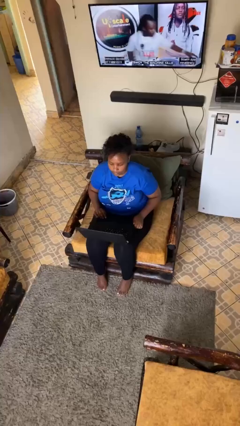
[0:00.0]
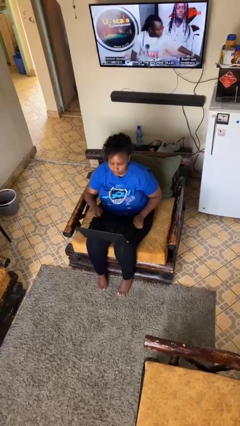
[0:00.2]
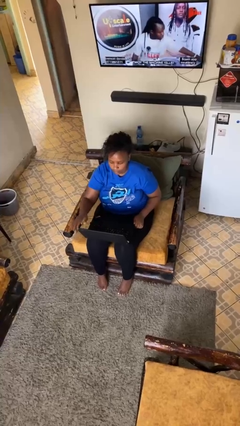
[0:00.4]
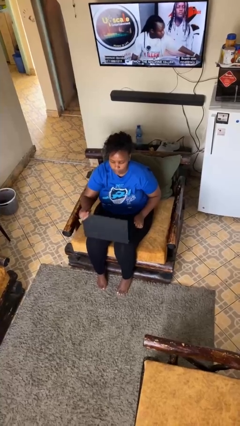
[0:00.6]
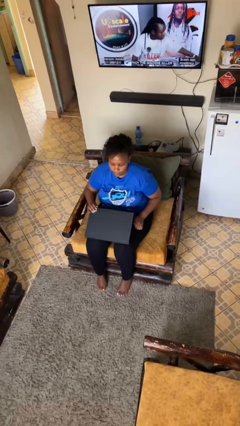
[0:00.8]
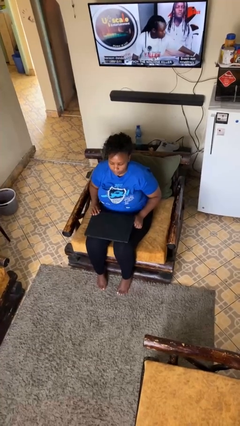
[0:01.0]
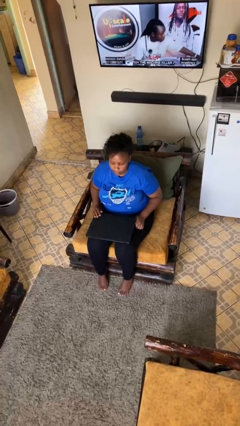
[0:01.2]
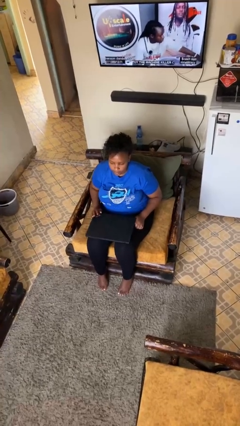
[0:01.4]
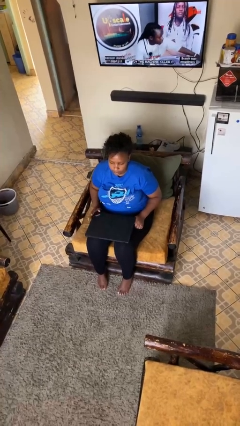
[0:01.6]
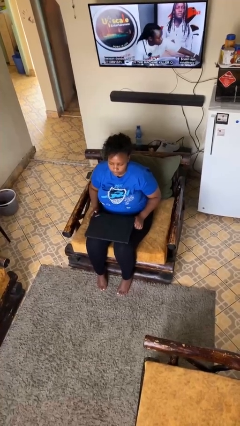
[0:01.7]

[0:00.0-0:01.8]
person closes laptop

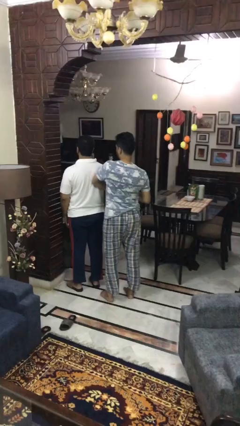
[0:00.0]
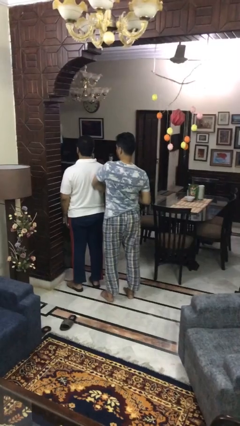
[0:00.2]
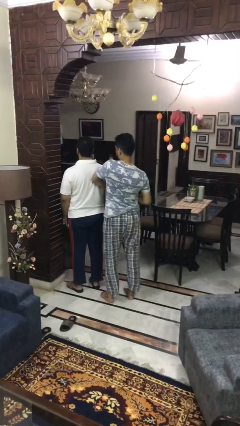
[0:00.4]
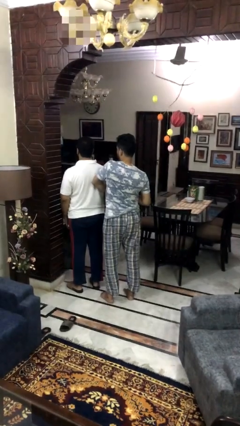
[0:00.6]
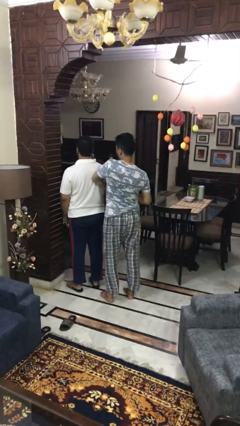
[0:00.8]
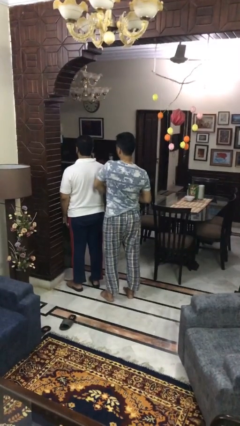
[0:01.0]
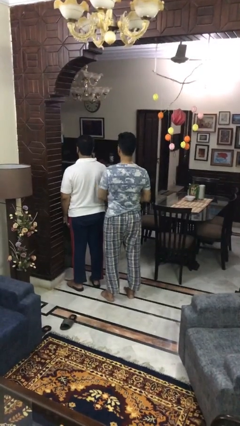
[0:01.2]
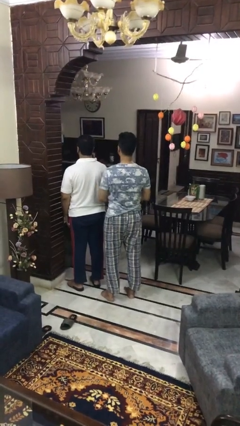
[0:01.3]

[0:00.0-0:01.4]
person nudges person with elbow

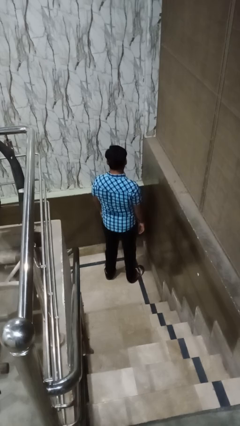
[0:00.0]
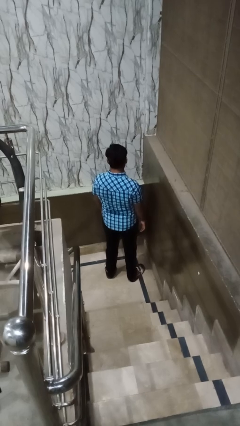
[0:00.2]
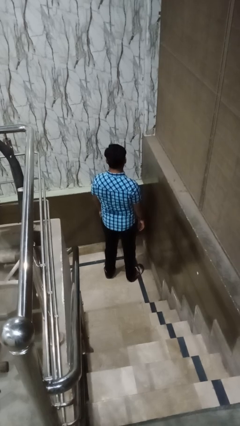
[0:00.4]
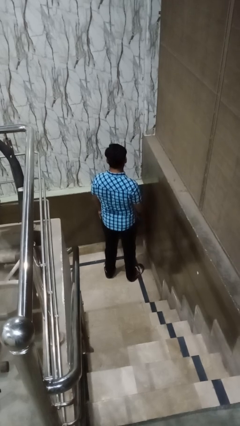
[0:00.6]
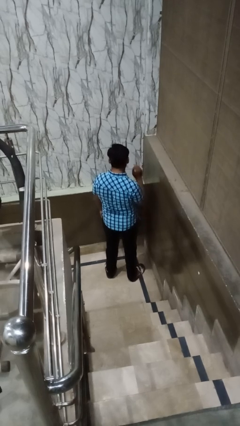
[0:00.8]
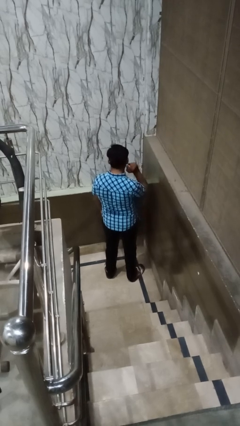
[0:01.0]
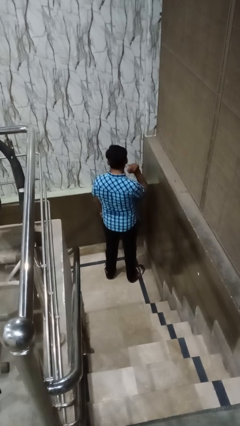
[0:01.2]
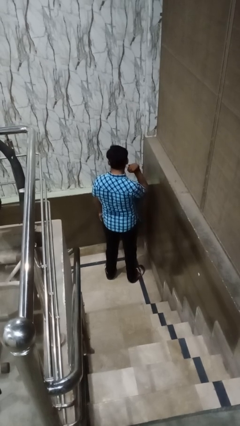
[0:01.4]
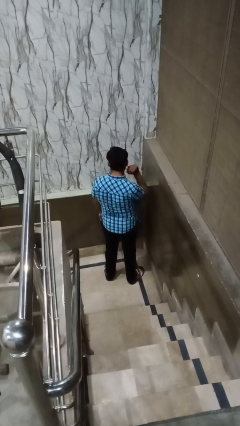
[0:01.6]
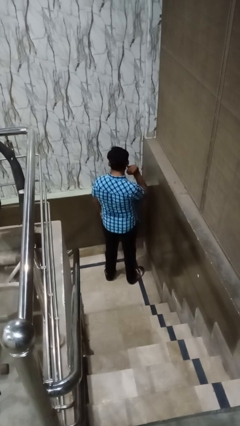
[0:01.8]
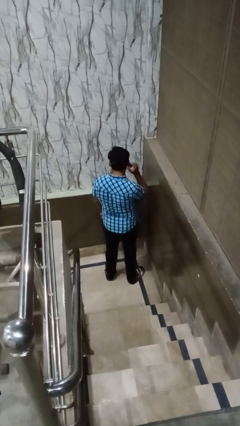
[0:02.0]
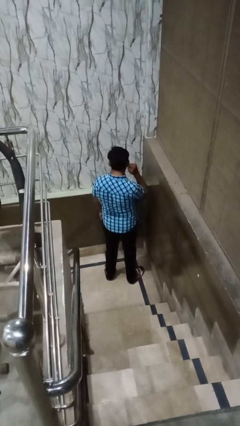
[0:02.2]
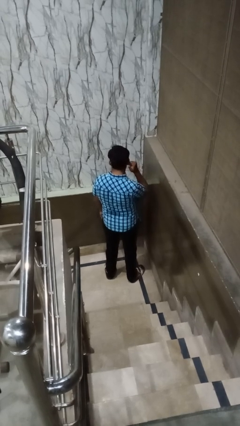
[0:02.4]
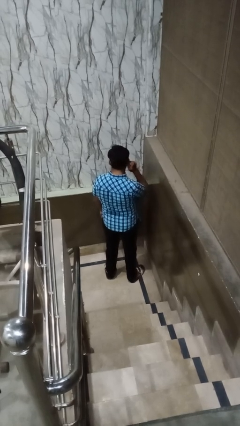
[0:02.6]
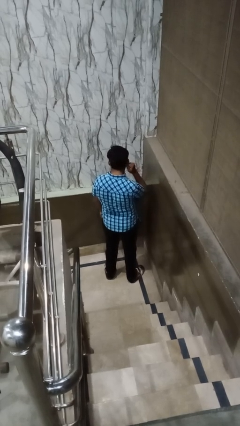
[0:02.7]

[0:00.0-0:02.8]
person touches earlobe

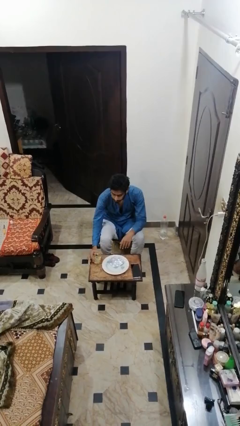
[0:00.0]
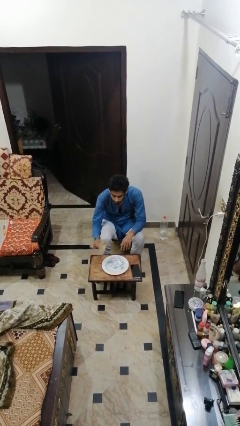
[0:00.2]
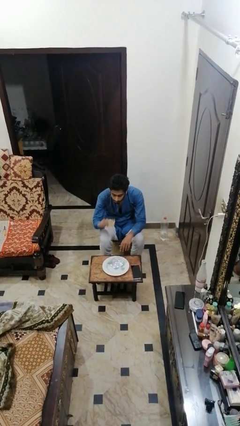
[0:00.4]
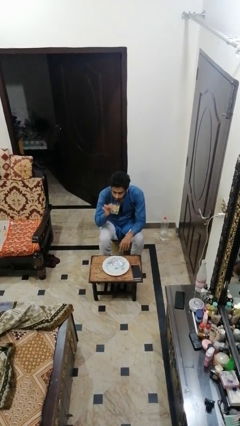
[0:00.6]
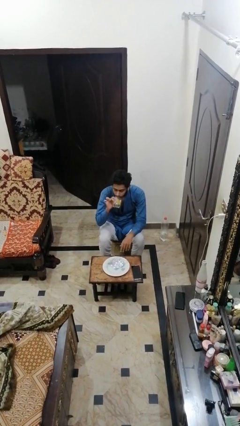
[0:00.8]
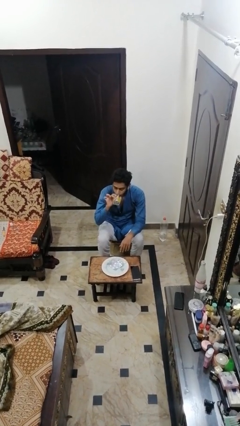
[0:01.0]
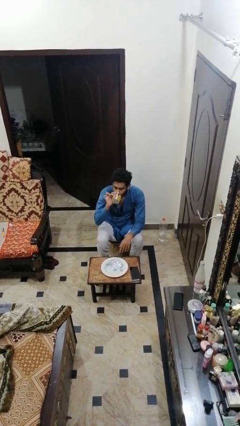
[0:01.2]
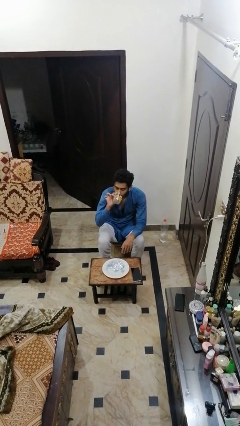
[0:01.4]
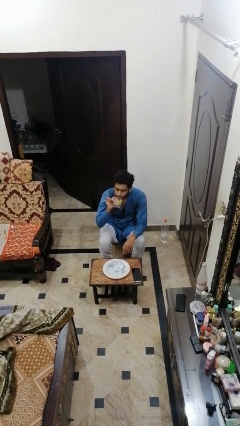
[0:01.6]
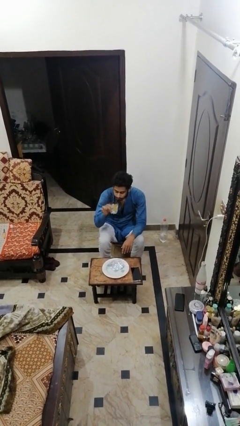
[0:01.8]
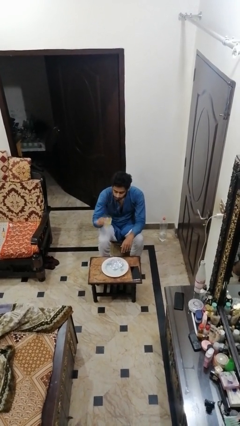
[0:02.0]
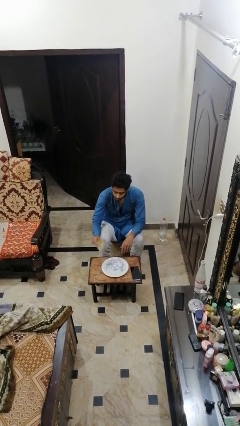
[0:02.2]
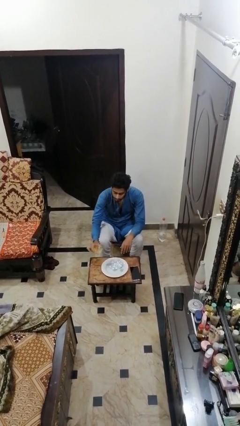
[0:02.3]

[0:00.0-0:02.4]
person drinks from cup

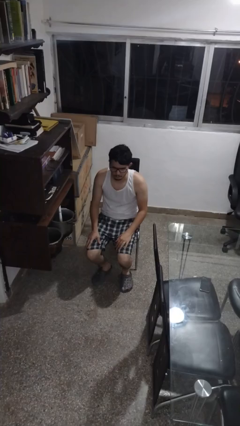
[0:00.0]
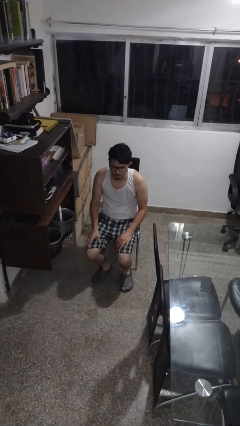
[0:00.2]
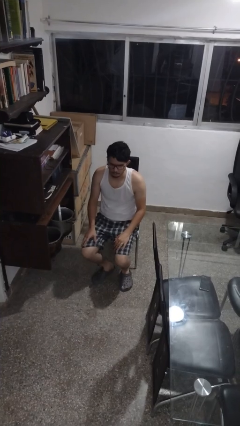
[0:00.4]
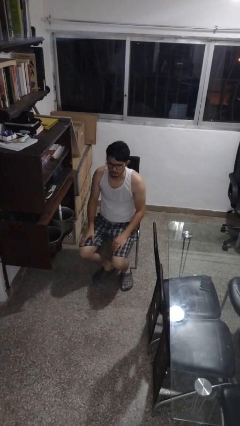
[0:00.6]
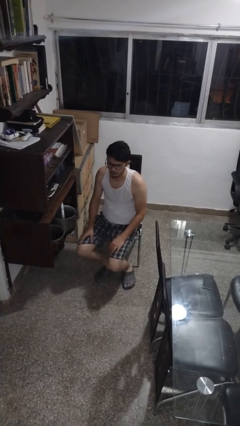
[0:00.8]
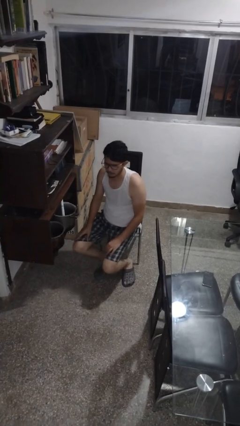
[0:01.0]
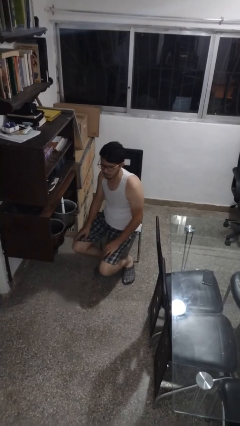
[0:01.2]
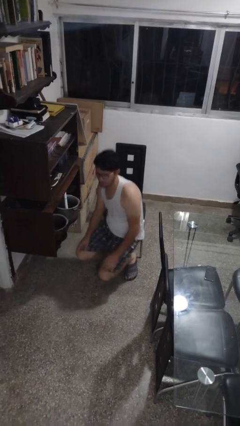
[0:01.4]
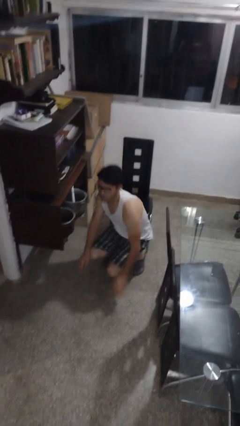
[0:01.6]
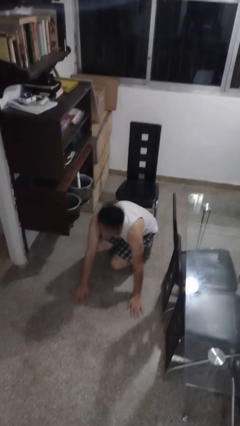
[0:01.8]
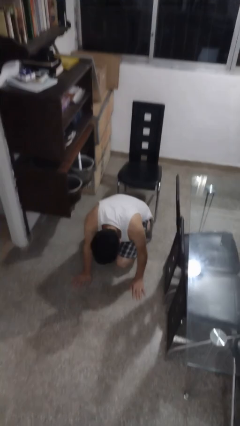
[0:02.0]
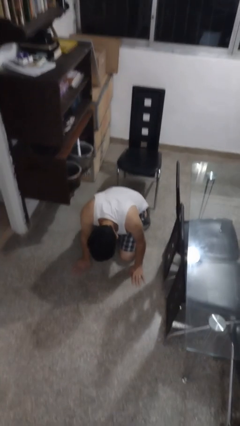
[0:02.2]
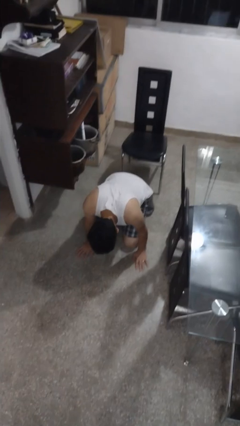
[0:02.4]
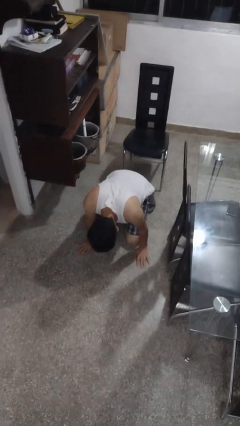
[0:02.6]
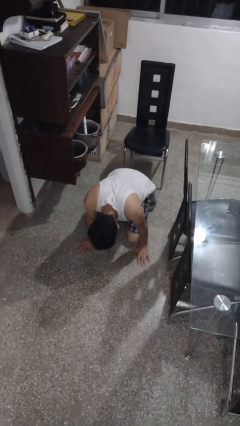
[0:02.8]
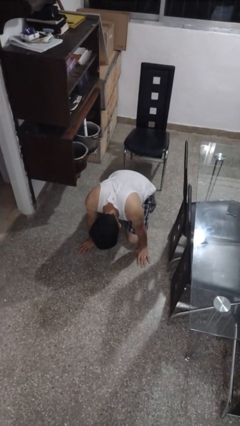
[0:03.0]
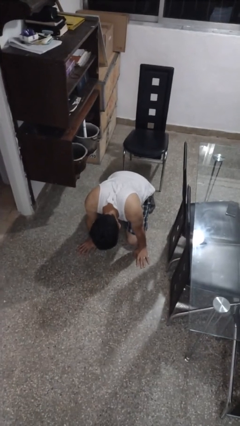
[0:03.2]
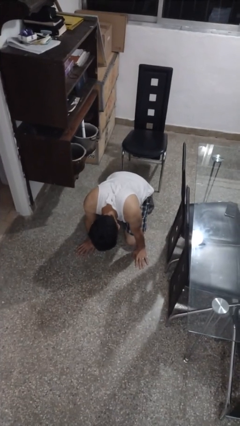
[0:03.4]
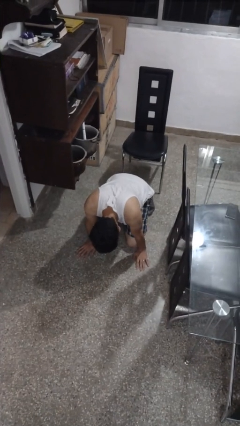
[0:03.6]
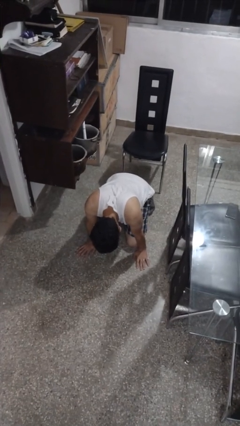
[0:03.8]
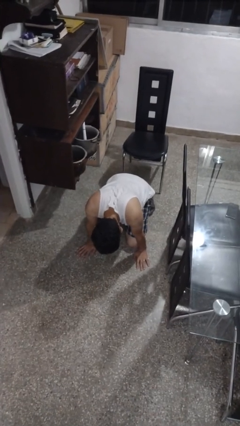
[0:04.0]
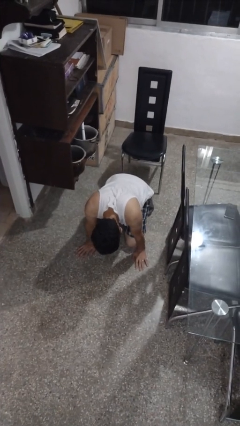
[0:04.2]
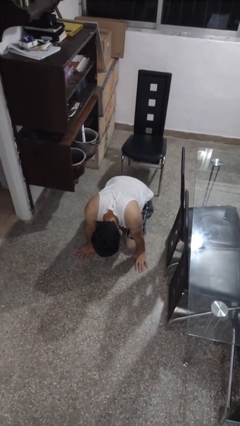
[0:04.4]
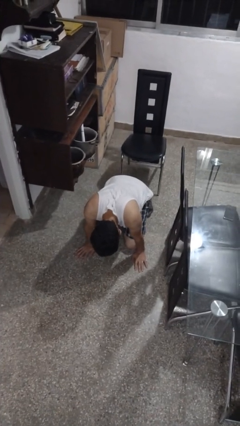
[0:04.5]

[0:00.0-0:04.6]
person falls from chair

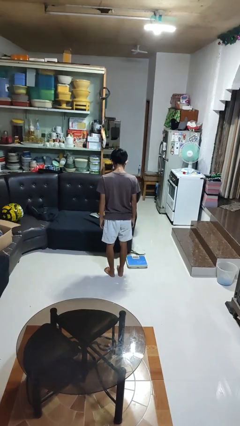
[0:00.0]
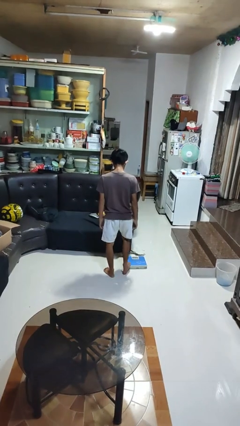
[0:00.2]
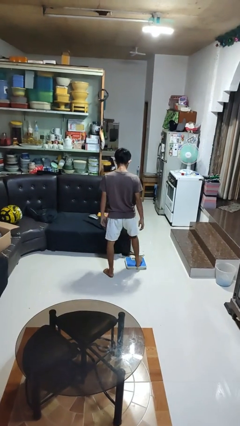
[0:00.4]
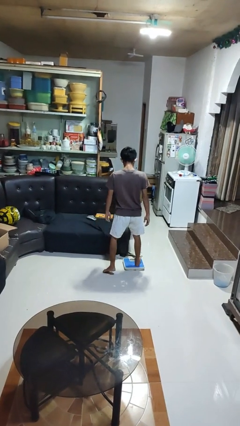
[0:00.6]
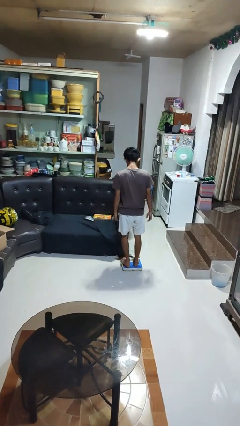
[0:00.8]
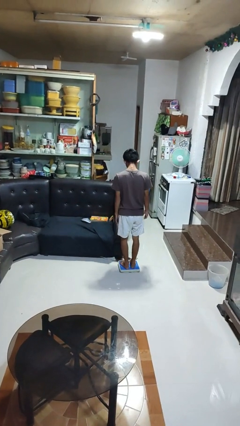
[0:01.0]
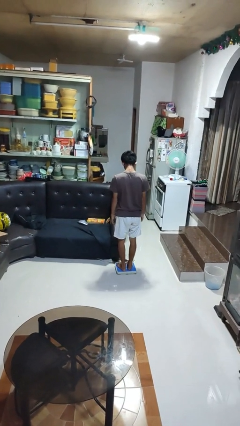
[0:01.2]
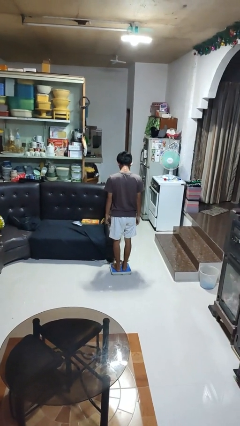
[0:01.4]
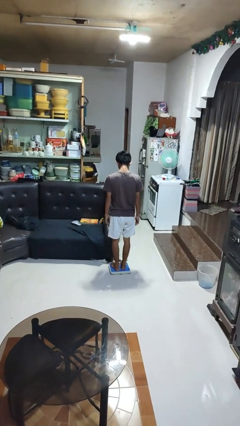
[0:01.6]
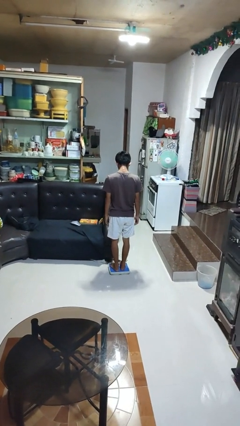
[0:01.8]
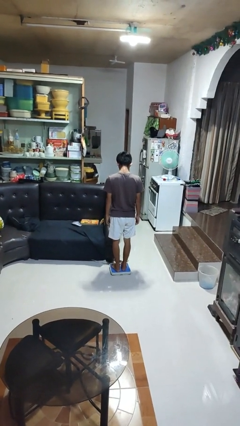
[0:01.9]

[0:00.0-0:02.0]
person uses bodyweight scale

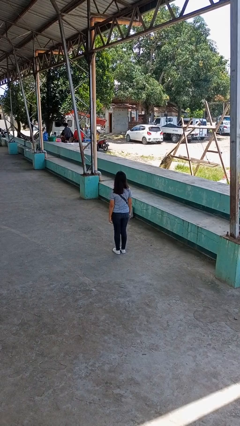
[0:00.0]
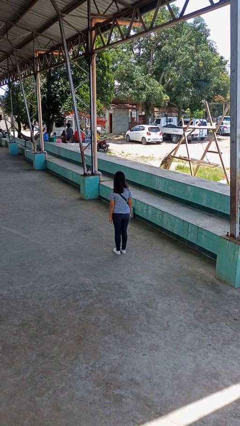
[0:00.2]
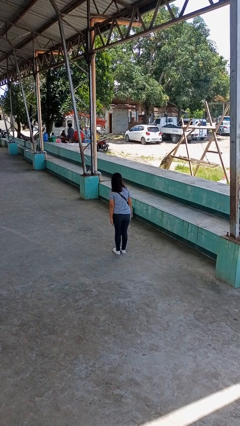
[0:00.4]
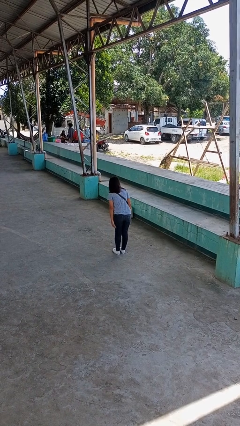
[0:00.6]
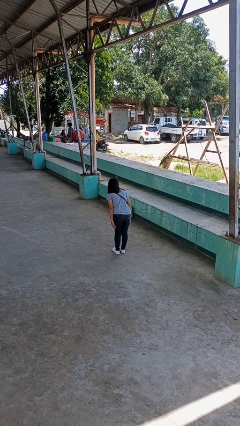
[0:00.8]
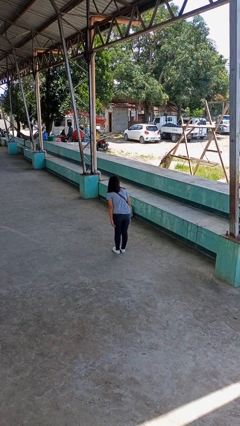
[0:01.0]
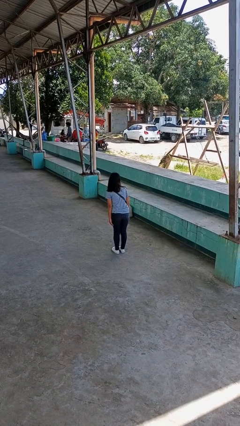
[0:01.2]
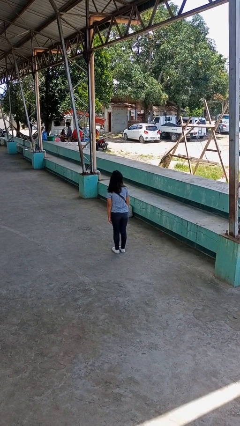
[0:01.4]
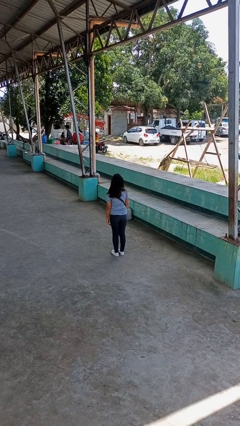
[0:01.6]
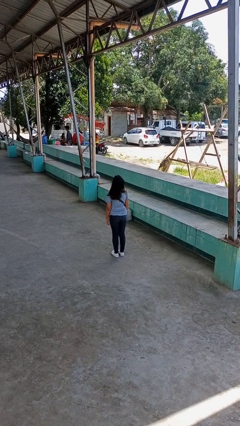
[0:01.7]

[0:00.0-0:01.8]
person bows
